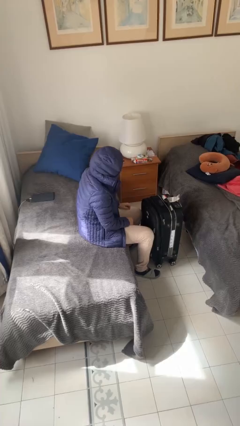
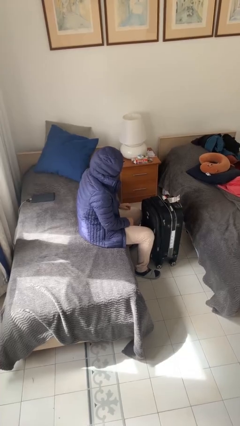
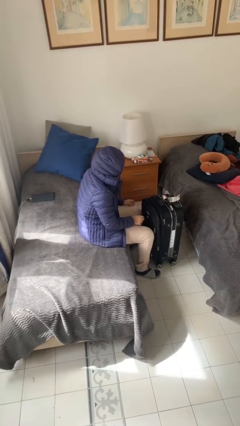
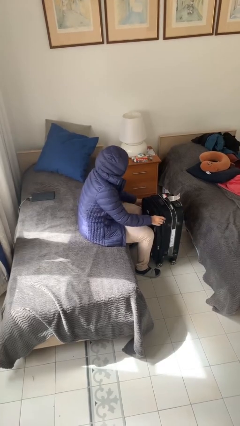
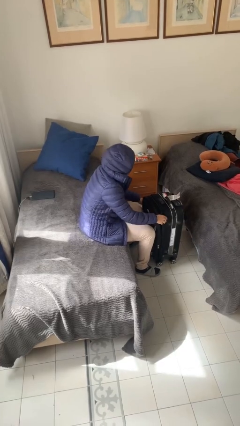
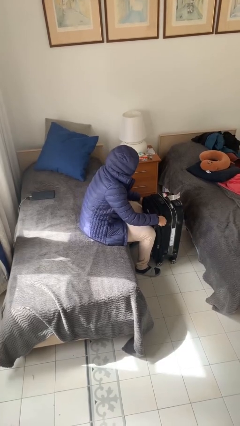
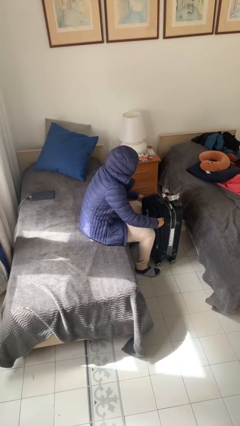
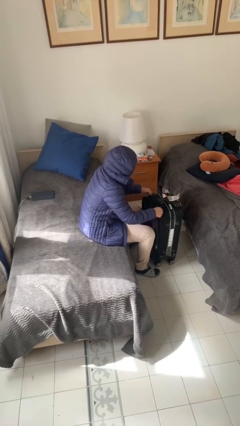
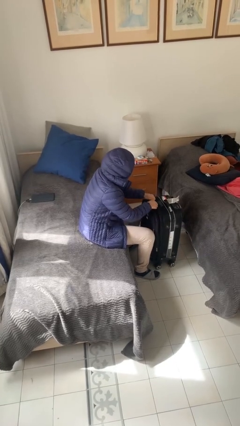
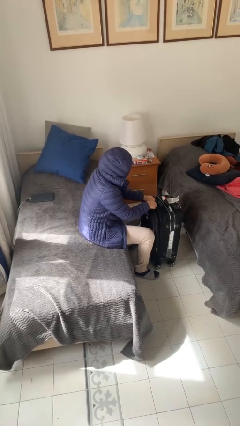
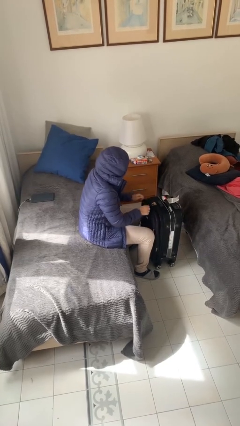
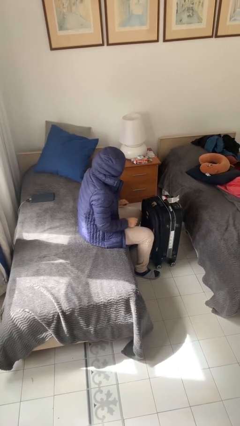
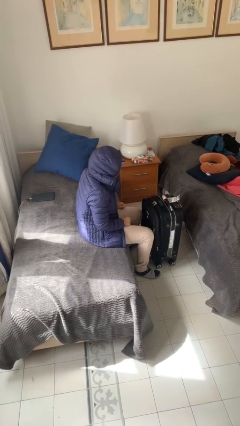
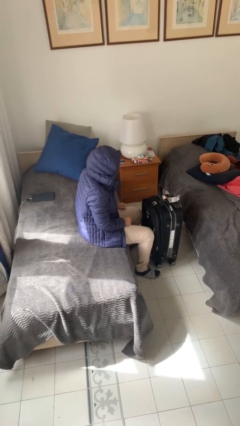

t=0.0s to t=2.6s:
person closes suitcase

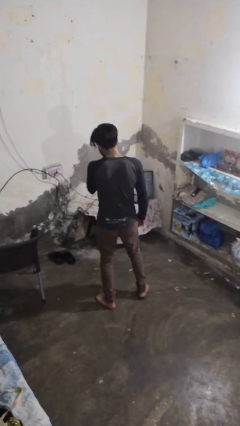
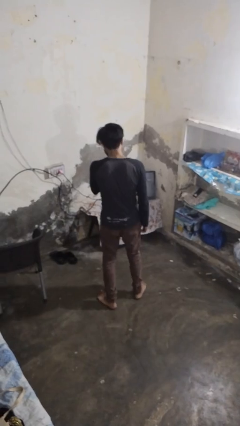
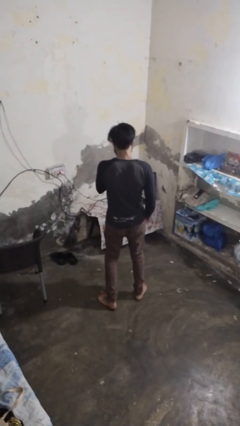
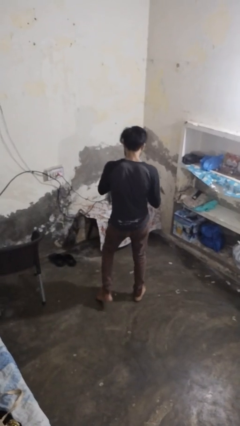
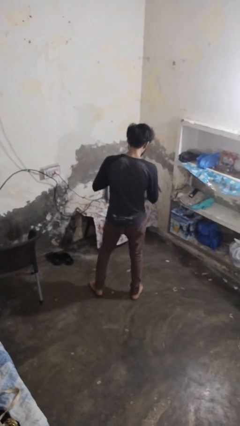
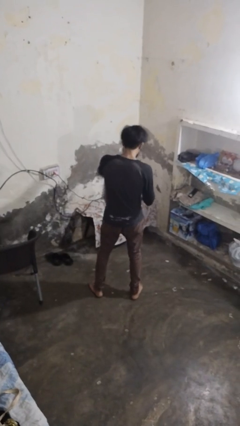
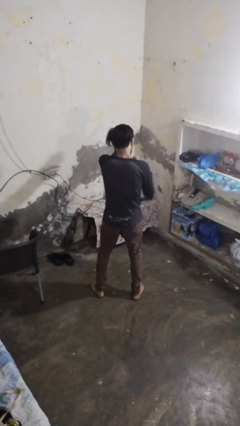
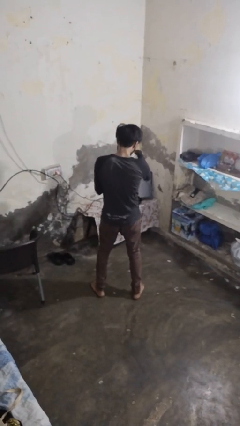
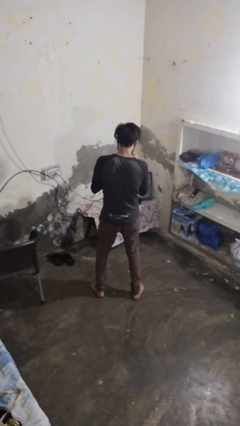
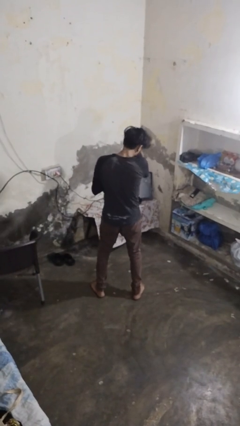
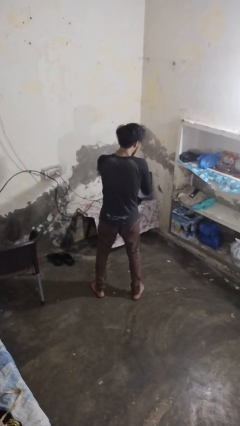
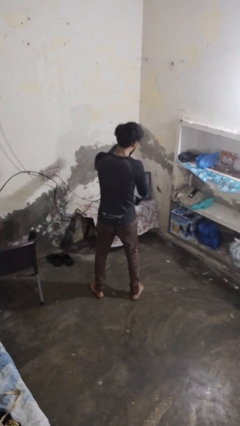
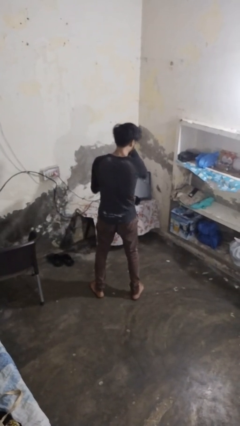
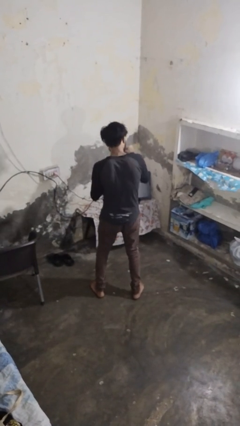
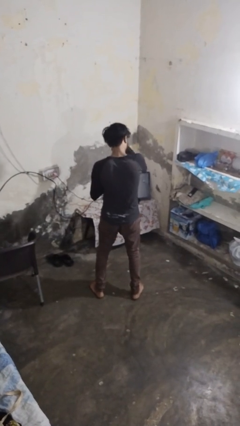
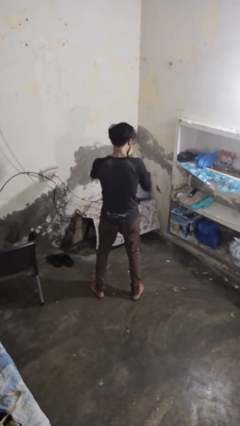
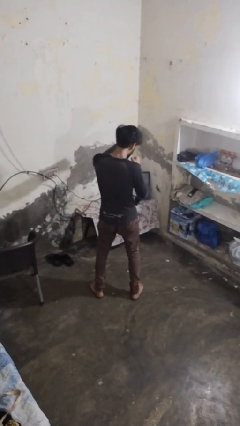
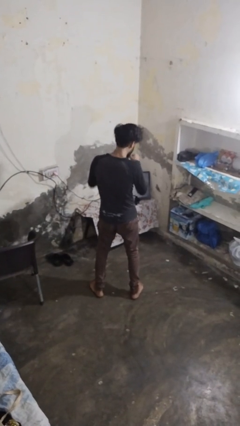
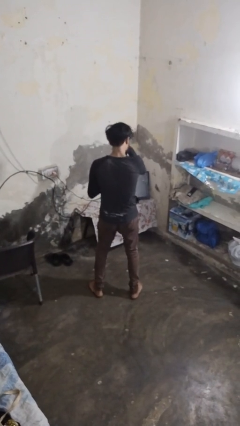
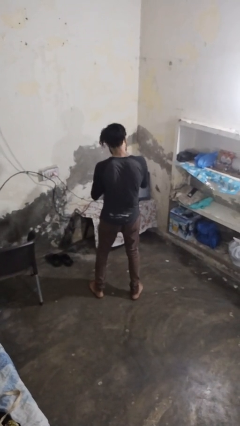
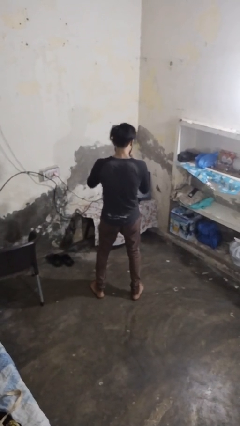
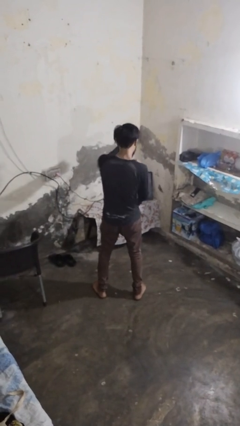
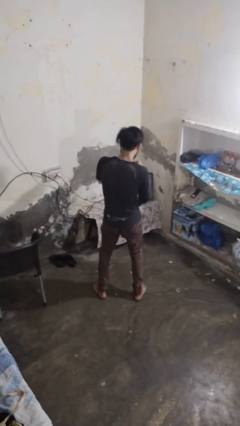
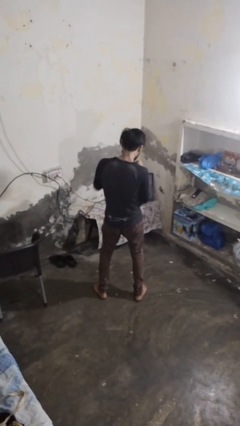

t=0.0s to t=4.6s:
person punches

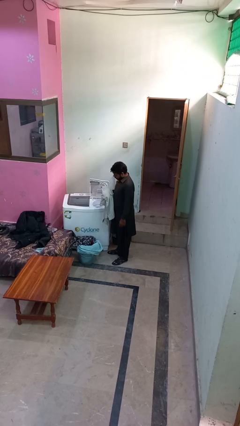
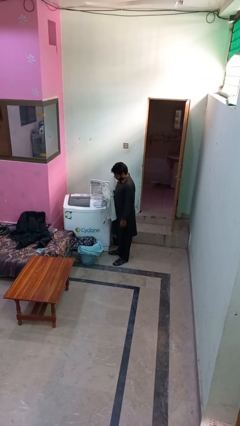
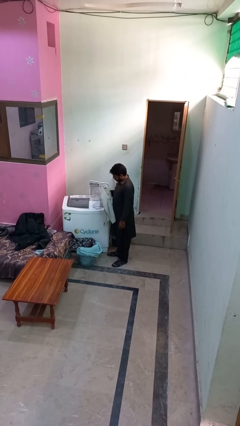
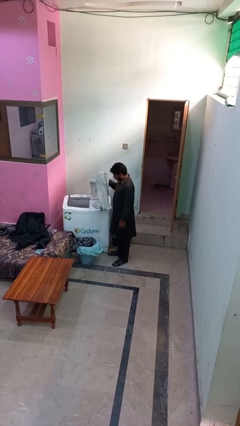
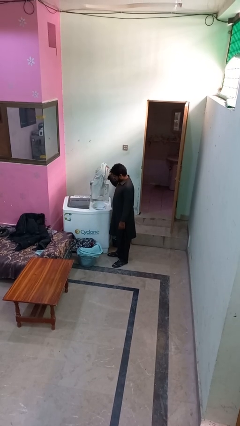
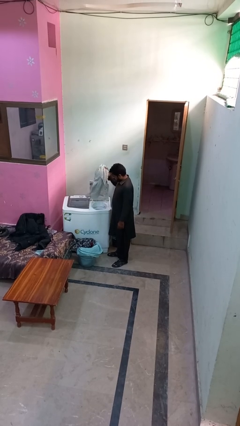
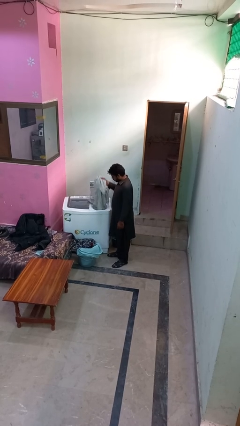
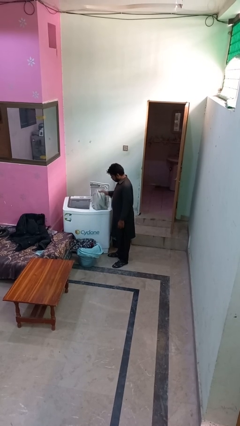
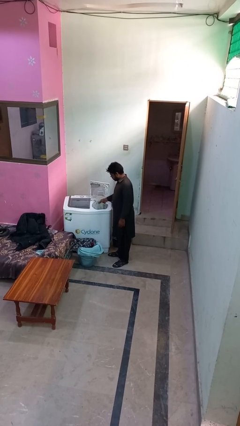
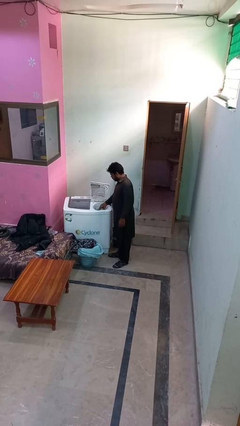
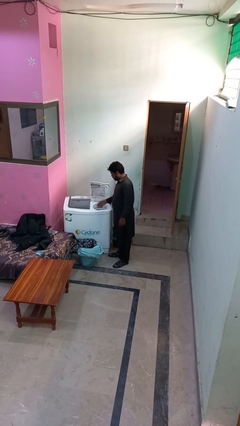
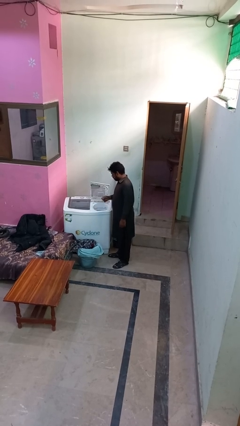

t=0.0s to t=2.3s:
person loads dryer

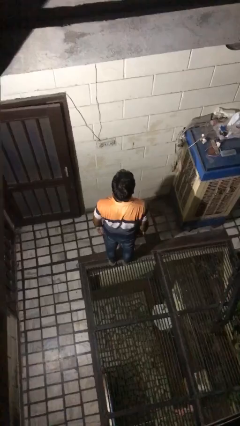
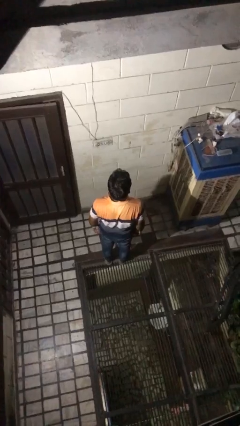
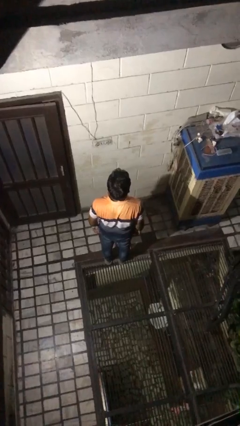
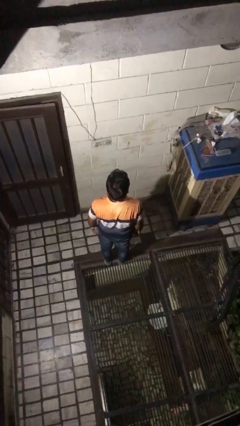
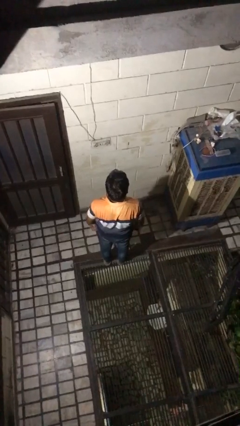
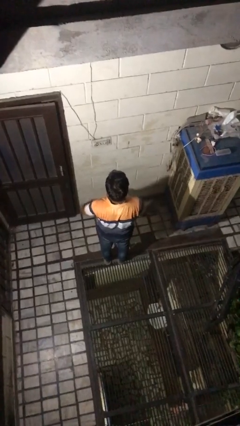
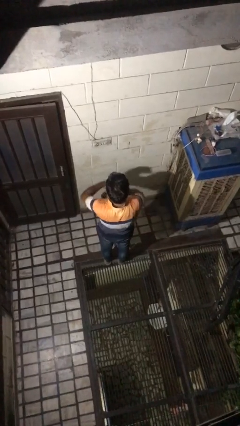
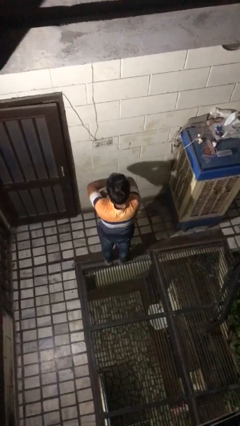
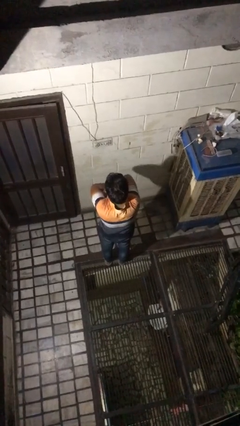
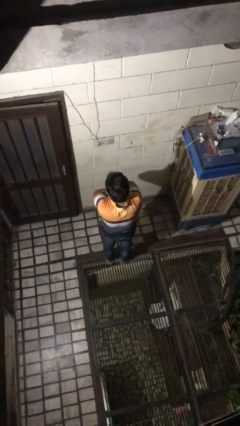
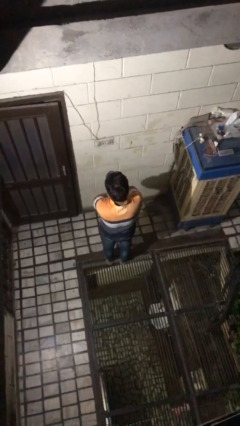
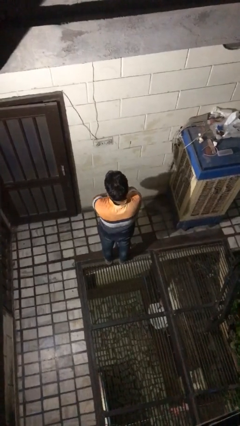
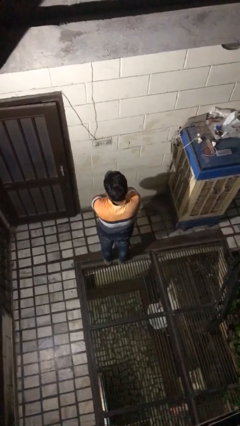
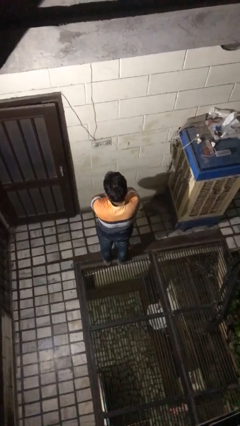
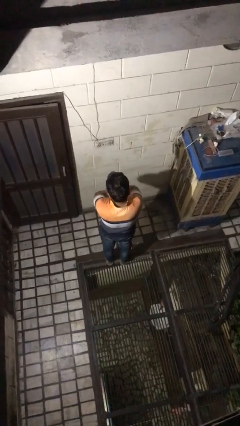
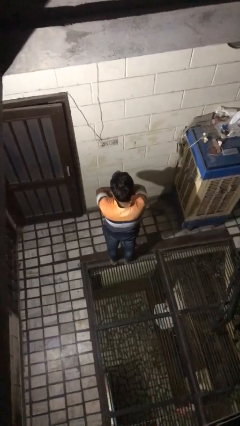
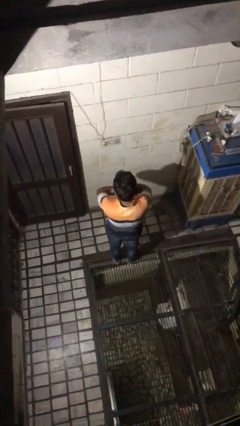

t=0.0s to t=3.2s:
person crosses arms

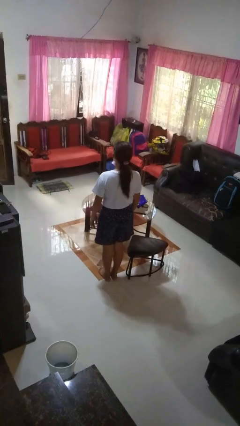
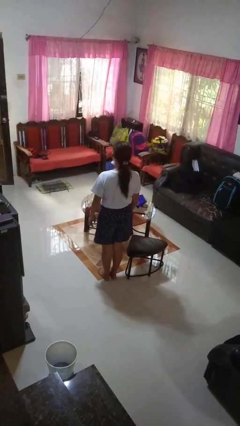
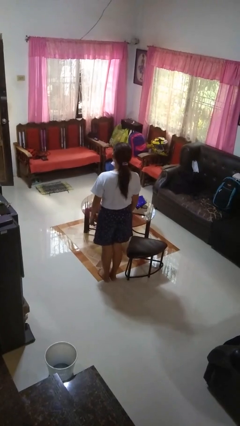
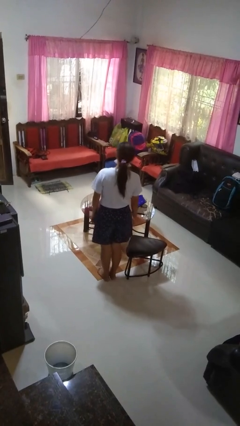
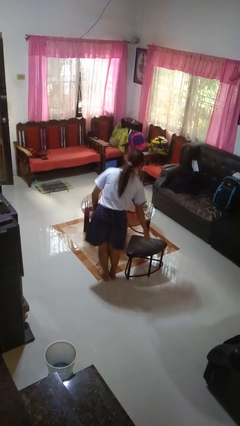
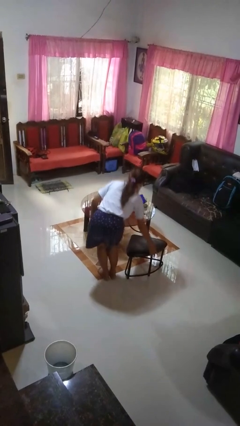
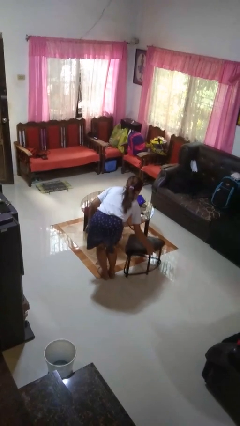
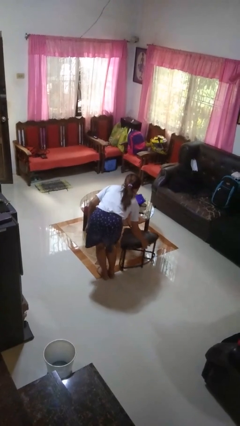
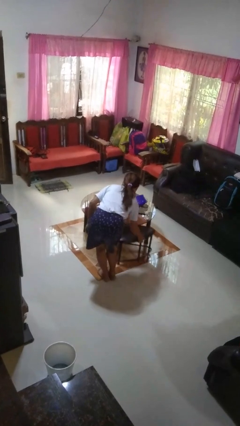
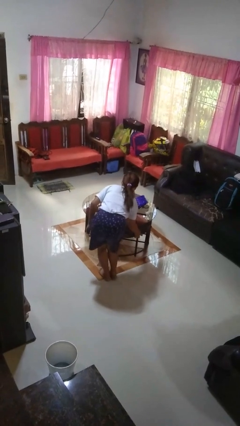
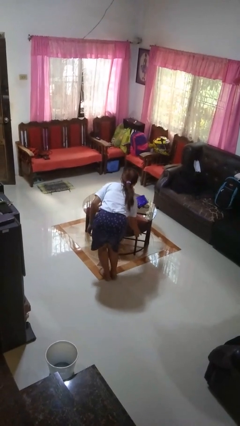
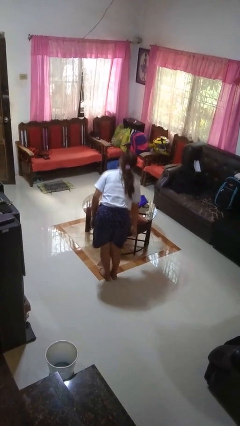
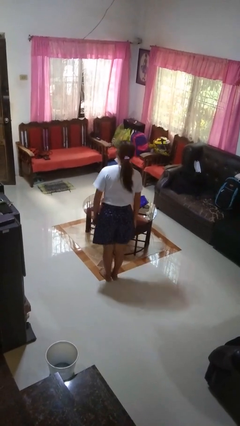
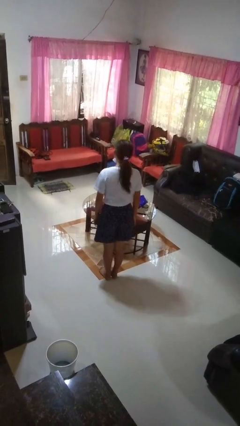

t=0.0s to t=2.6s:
person pushes in chair

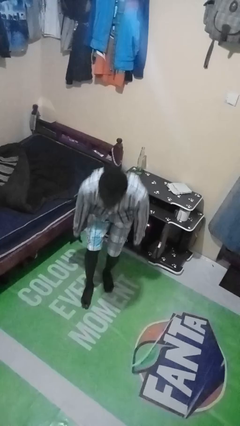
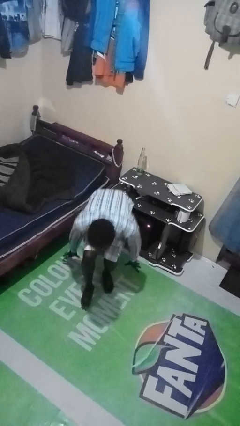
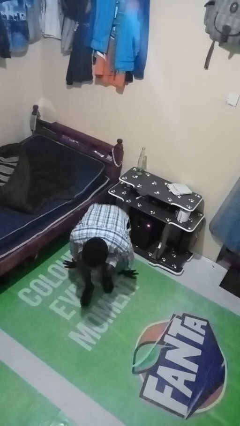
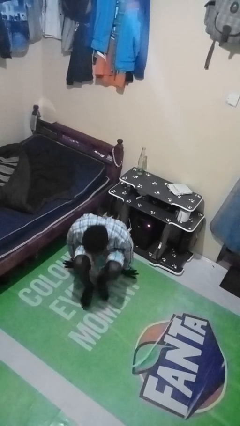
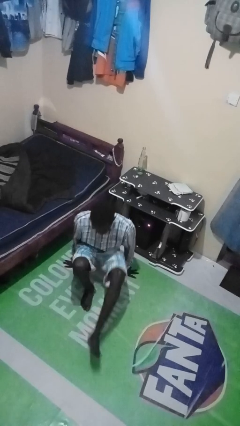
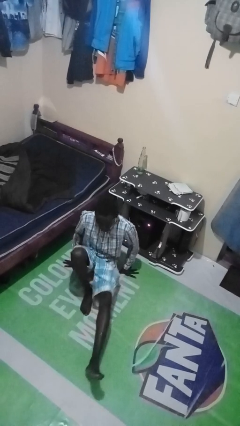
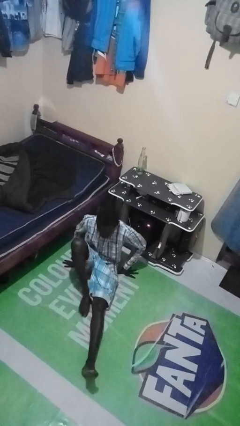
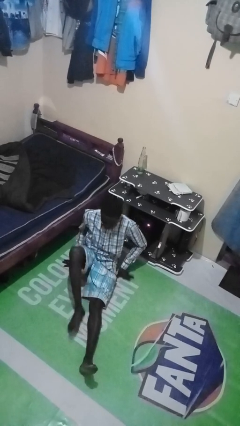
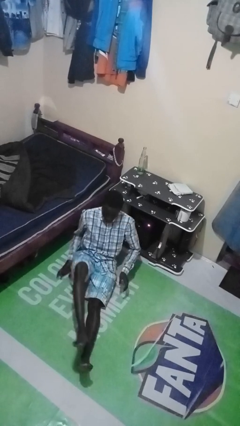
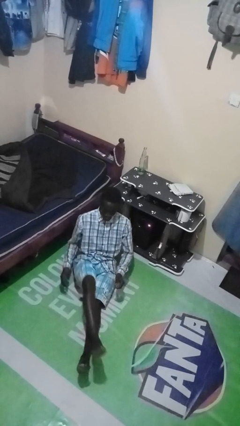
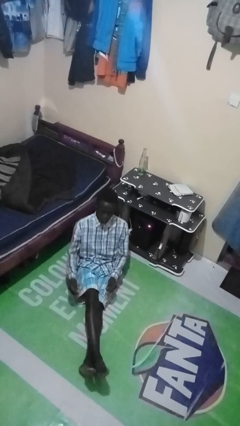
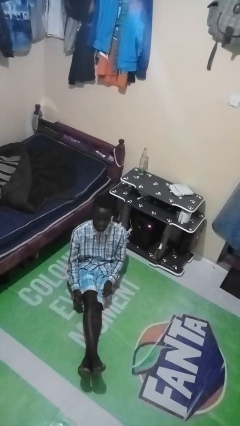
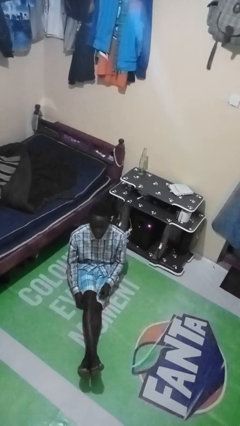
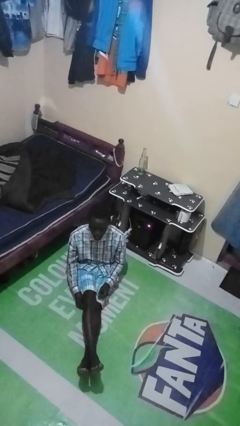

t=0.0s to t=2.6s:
person sits crisscross
